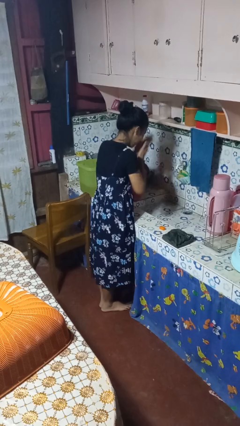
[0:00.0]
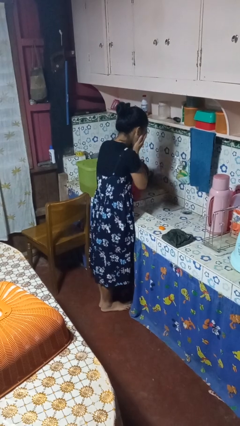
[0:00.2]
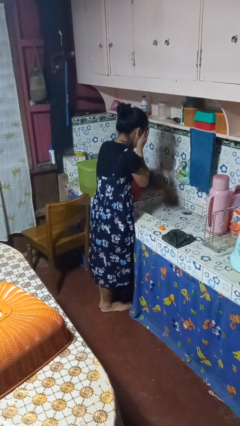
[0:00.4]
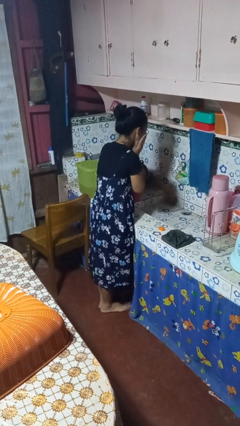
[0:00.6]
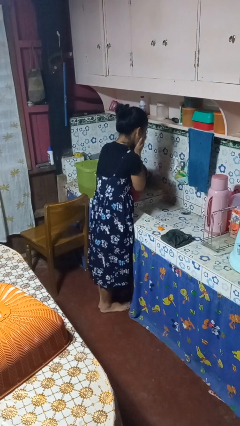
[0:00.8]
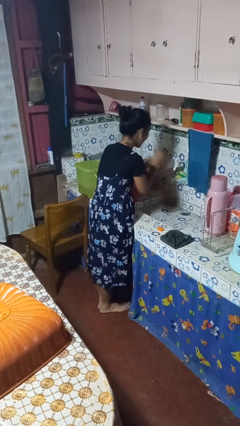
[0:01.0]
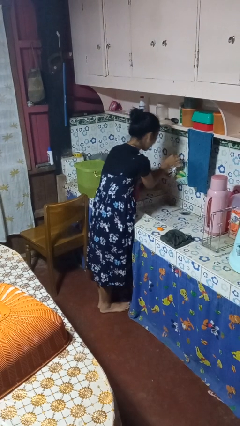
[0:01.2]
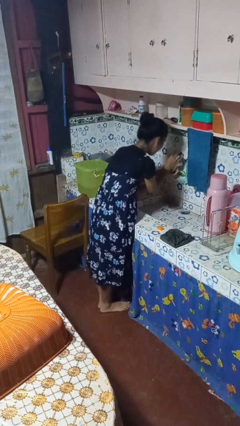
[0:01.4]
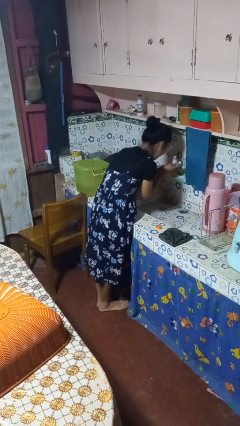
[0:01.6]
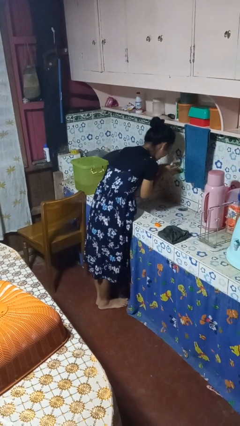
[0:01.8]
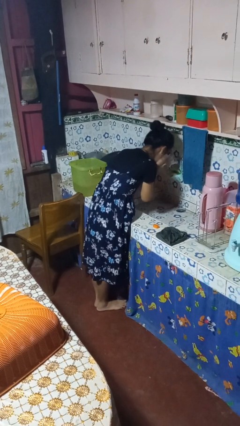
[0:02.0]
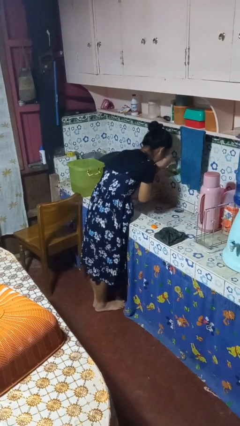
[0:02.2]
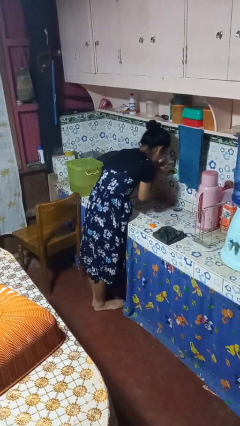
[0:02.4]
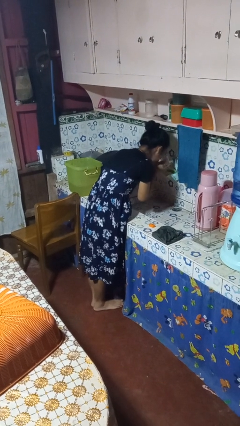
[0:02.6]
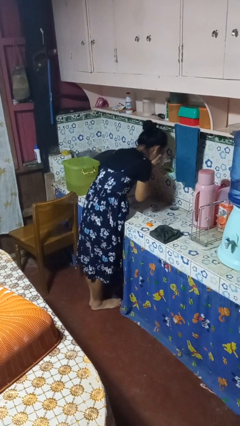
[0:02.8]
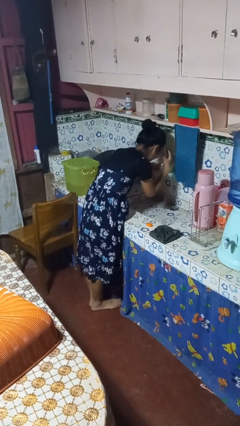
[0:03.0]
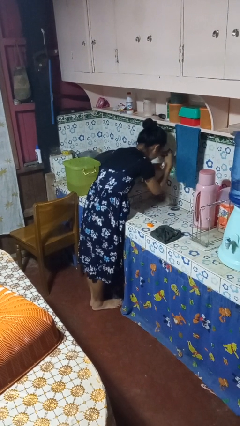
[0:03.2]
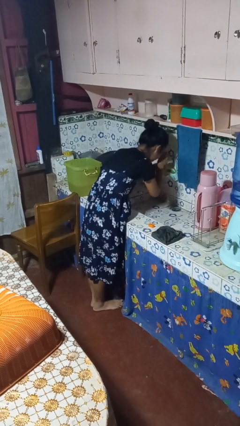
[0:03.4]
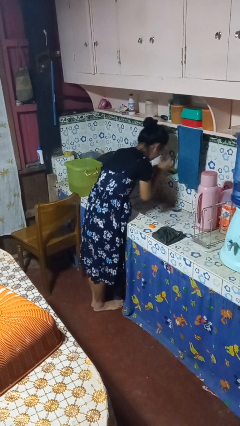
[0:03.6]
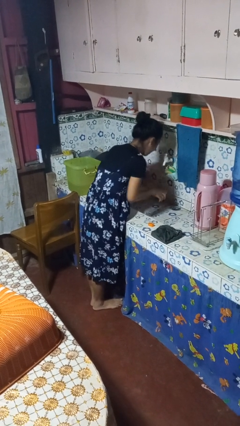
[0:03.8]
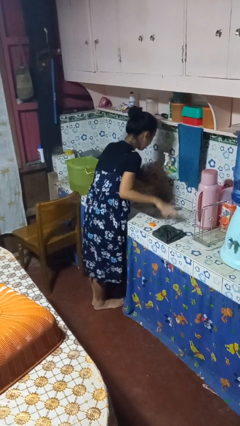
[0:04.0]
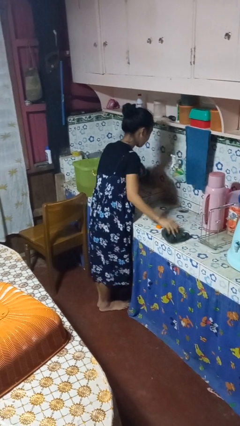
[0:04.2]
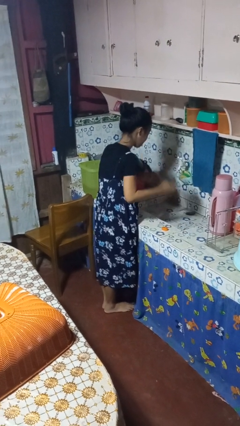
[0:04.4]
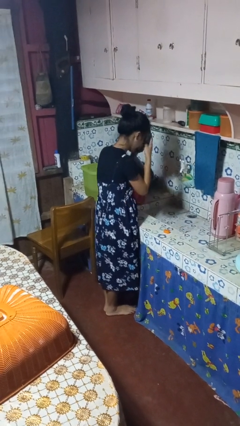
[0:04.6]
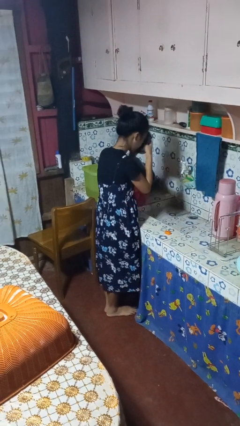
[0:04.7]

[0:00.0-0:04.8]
person washes face

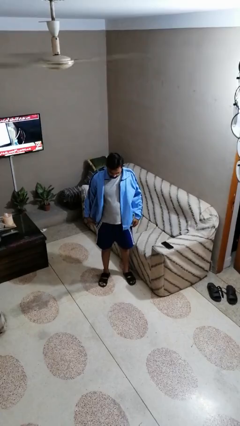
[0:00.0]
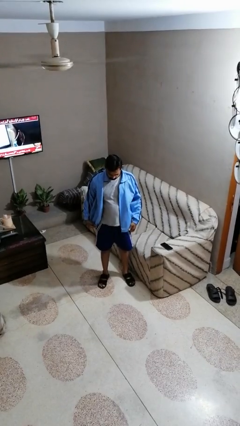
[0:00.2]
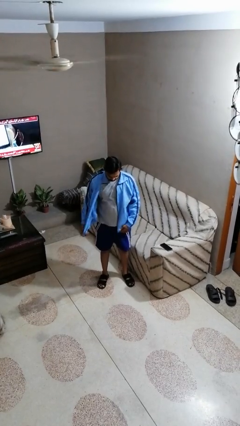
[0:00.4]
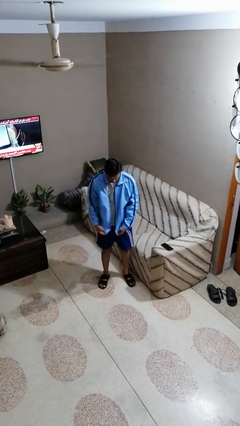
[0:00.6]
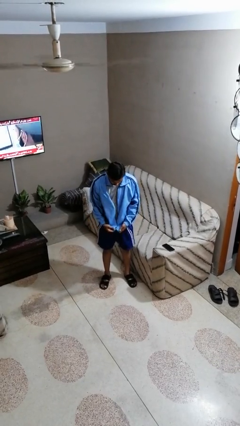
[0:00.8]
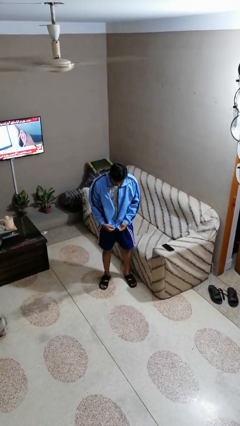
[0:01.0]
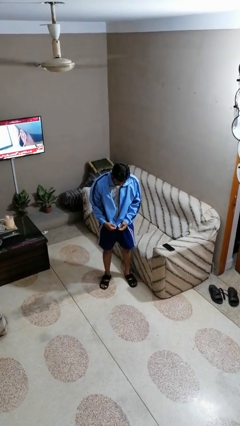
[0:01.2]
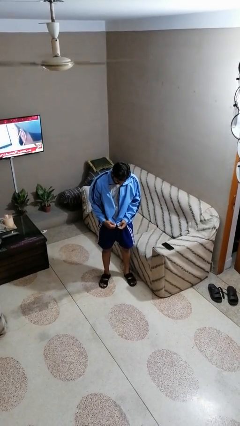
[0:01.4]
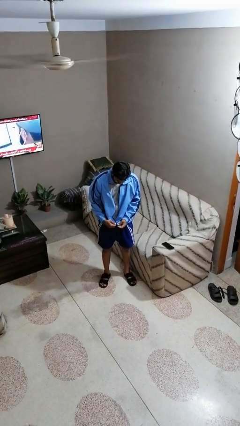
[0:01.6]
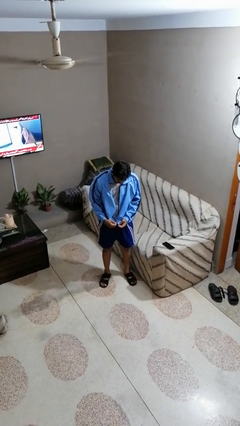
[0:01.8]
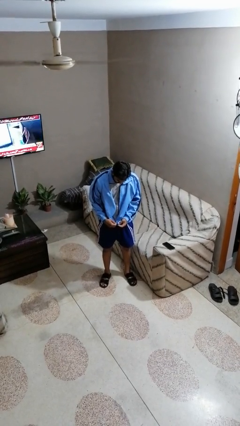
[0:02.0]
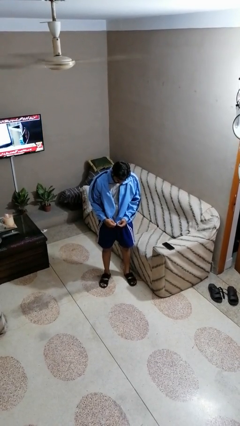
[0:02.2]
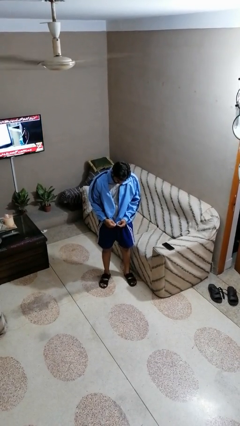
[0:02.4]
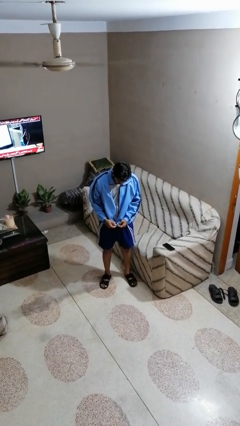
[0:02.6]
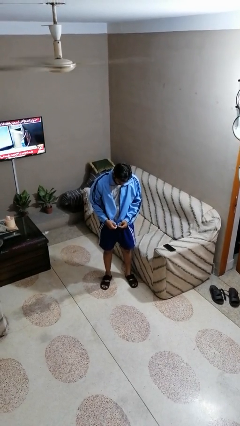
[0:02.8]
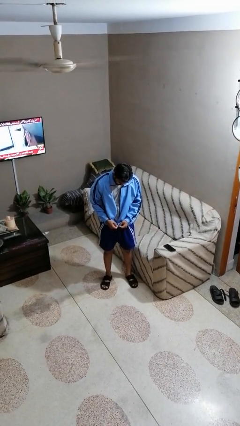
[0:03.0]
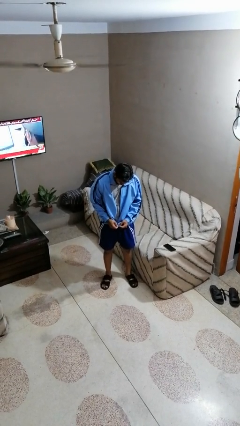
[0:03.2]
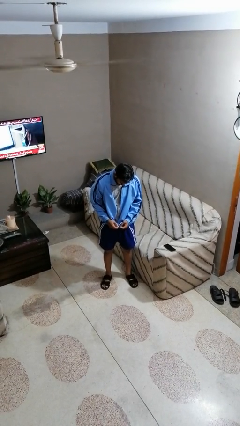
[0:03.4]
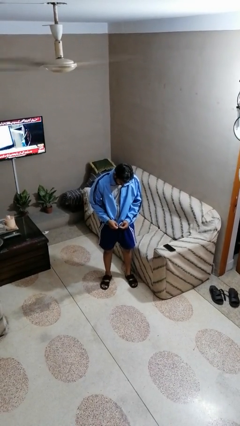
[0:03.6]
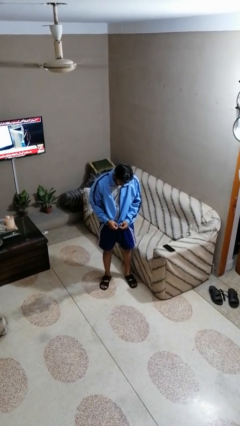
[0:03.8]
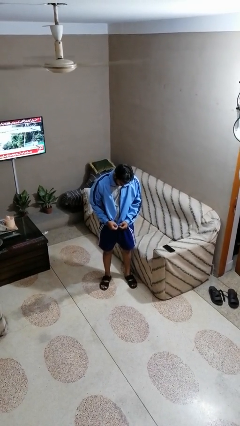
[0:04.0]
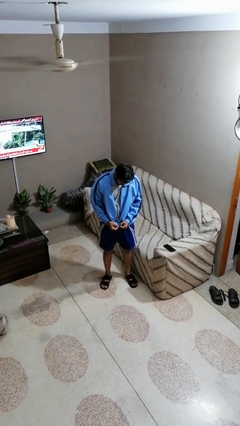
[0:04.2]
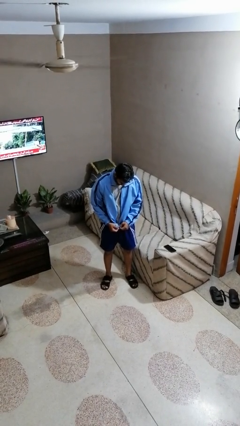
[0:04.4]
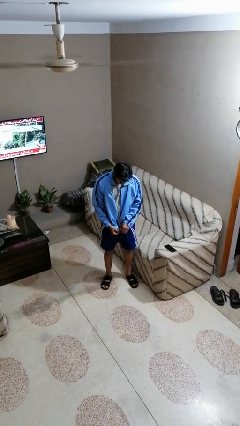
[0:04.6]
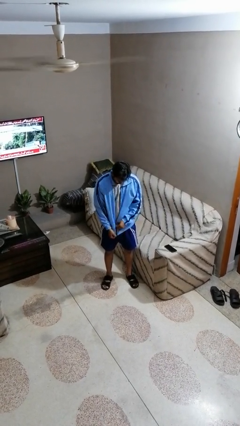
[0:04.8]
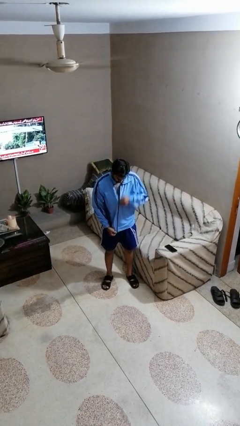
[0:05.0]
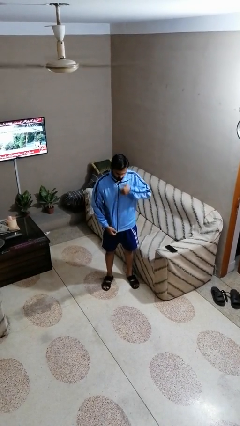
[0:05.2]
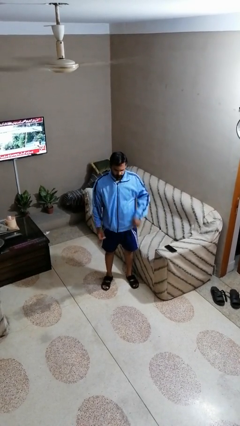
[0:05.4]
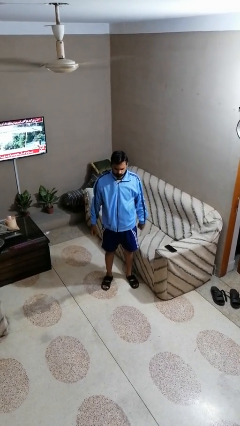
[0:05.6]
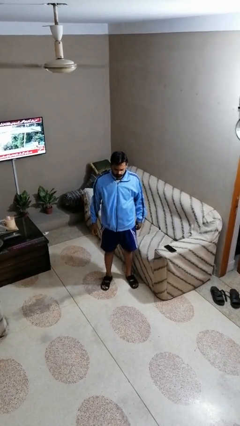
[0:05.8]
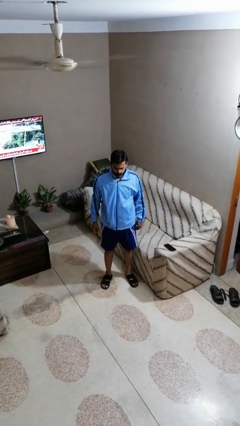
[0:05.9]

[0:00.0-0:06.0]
person zips up jacket

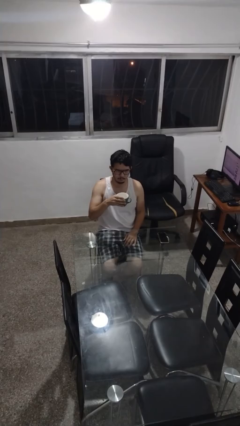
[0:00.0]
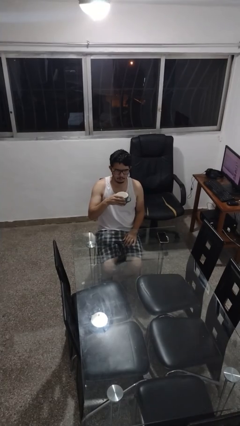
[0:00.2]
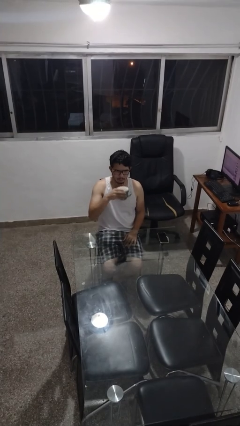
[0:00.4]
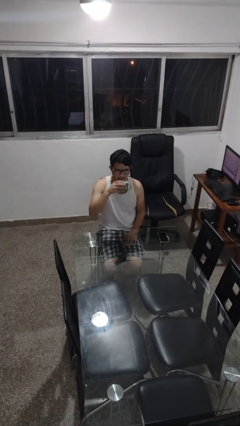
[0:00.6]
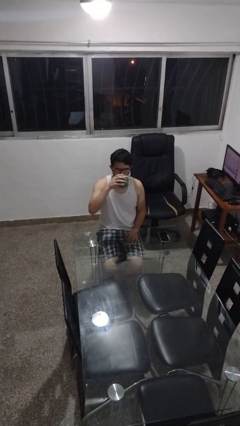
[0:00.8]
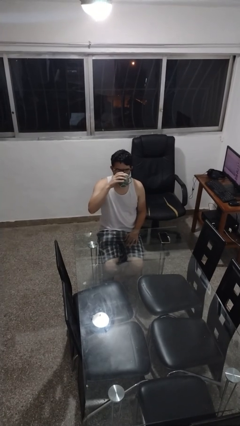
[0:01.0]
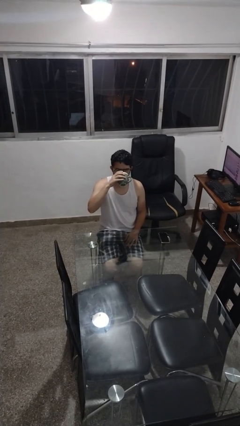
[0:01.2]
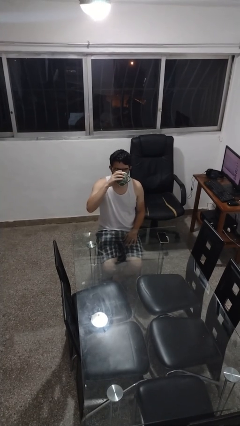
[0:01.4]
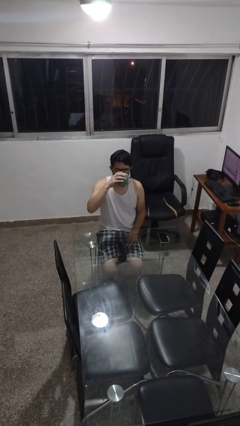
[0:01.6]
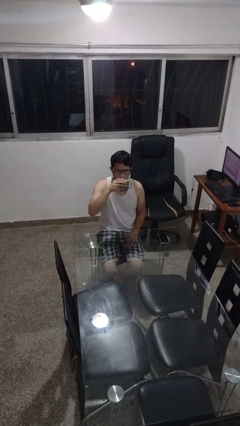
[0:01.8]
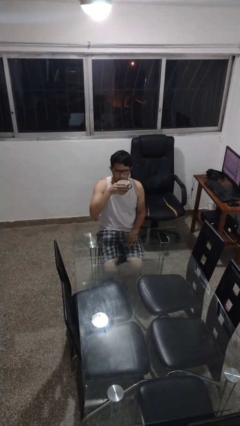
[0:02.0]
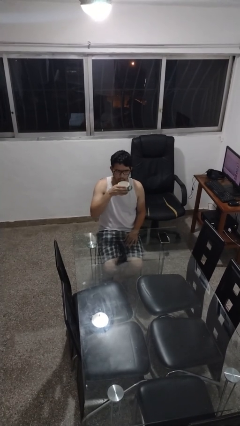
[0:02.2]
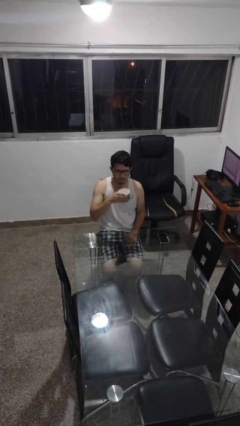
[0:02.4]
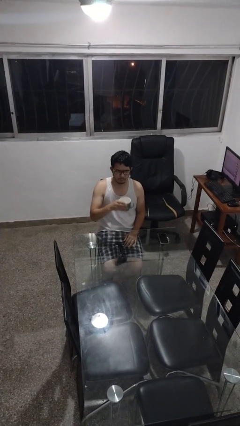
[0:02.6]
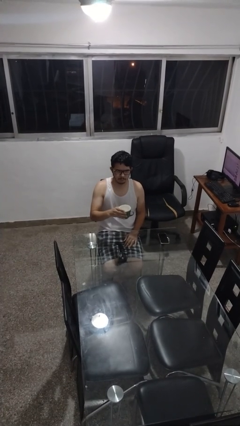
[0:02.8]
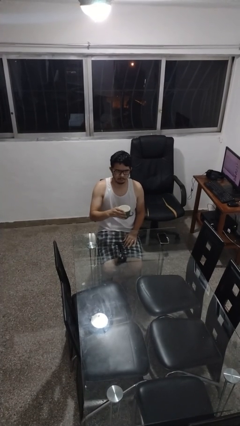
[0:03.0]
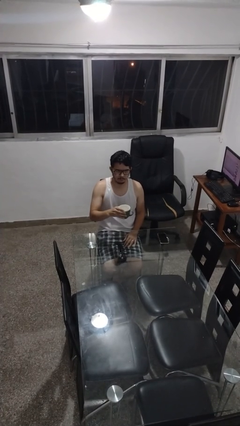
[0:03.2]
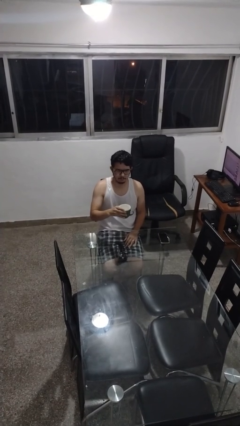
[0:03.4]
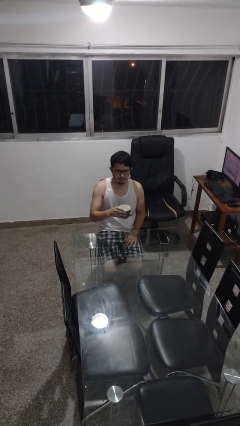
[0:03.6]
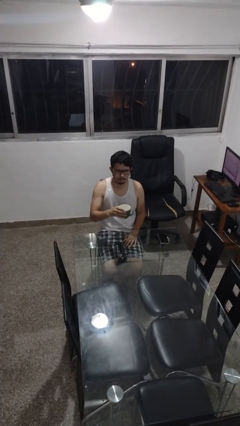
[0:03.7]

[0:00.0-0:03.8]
person drinks from mug

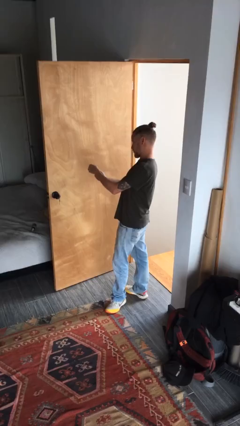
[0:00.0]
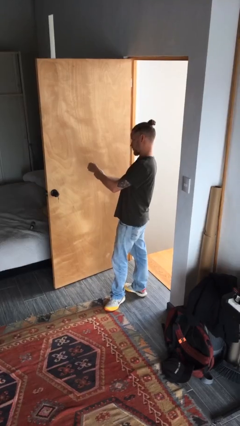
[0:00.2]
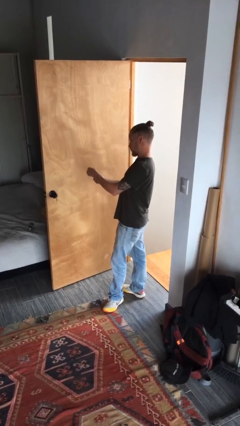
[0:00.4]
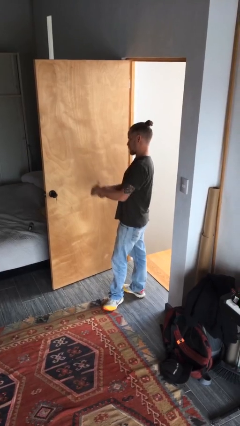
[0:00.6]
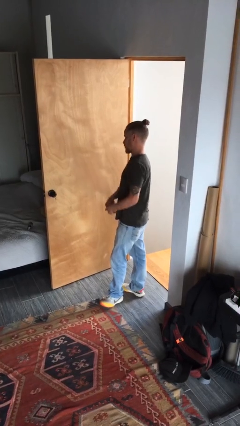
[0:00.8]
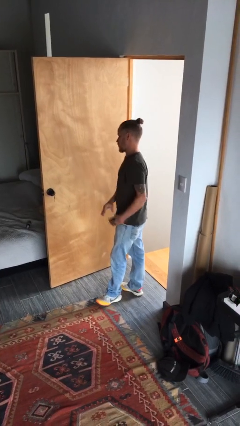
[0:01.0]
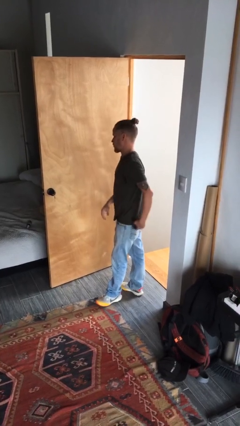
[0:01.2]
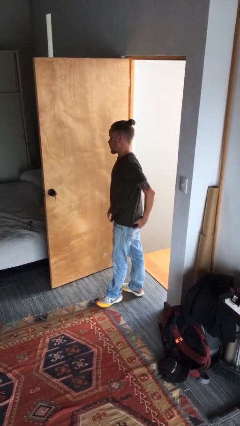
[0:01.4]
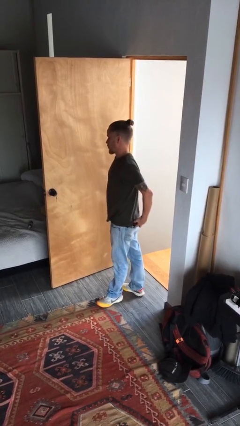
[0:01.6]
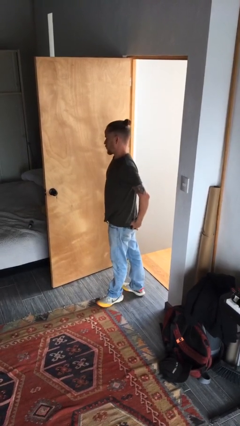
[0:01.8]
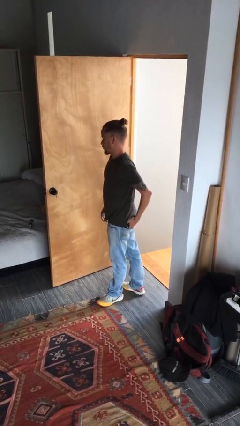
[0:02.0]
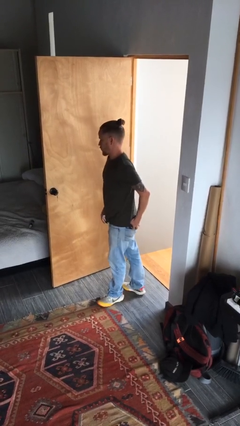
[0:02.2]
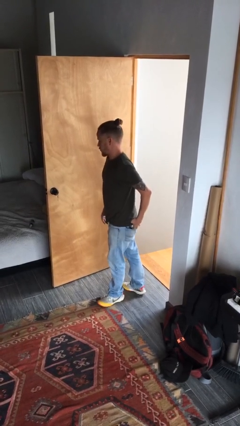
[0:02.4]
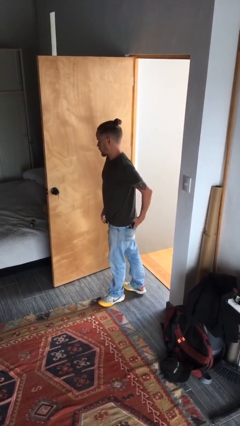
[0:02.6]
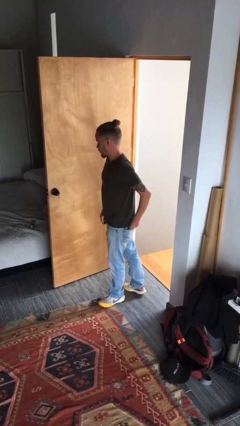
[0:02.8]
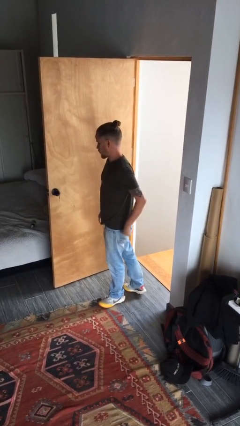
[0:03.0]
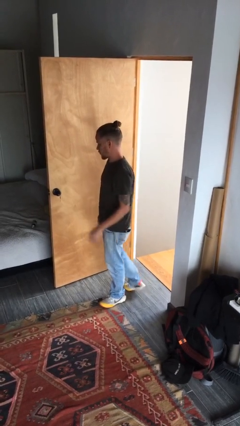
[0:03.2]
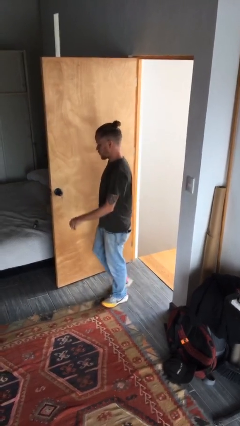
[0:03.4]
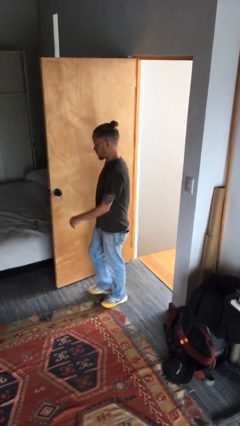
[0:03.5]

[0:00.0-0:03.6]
person puts phone into pocket
